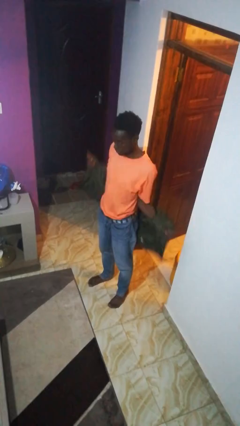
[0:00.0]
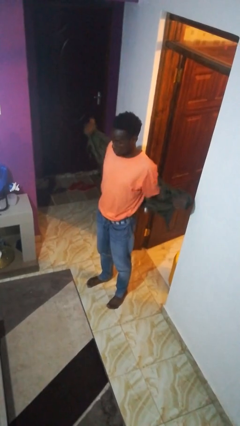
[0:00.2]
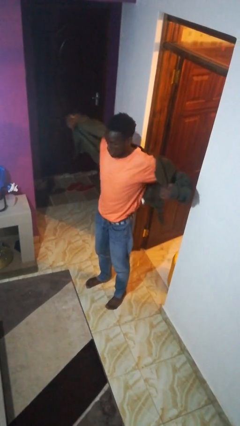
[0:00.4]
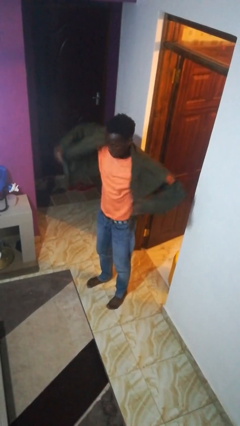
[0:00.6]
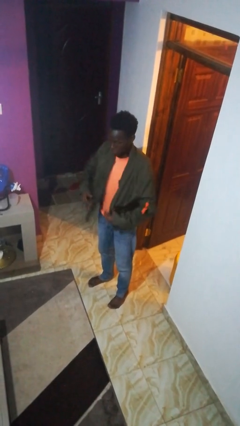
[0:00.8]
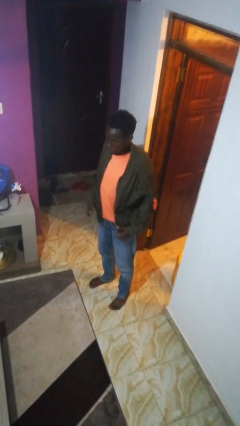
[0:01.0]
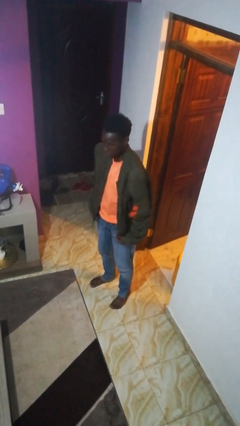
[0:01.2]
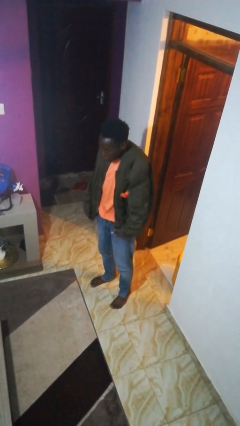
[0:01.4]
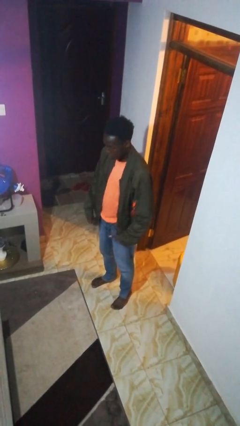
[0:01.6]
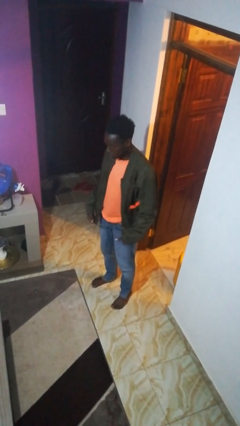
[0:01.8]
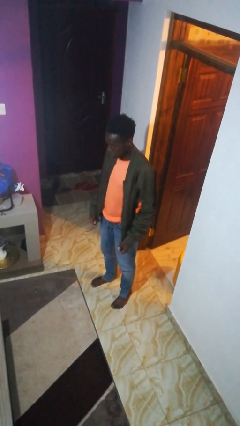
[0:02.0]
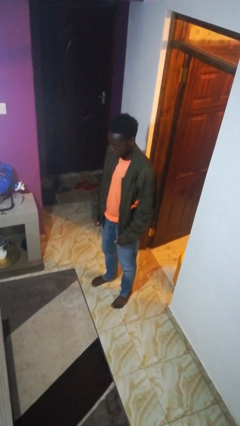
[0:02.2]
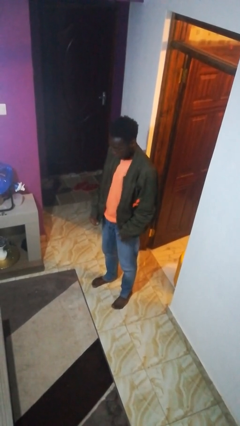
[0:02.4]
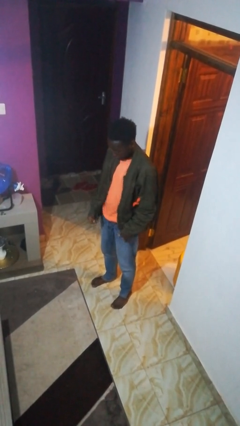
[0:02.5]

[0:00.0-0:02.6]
person puts on jacket

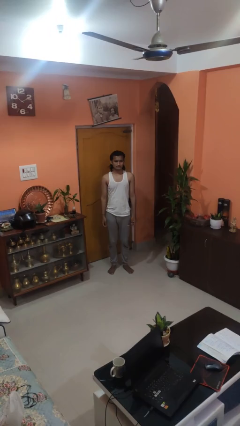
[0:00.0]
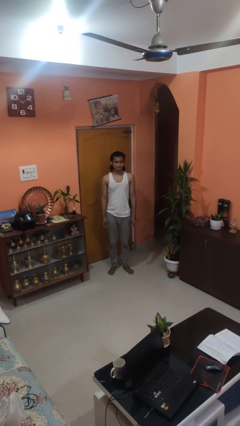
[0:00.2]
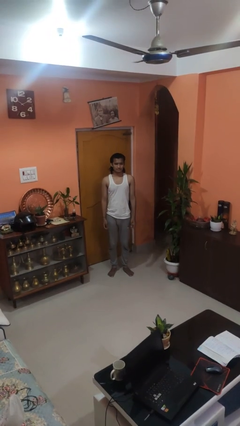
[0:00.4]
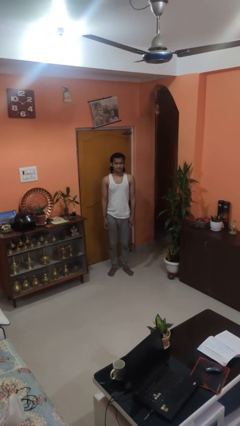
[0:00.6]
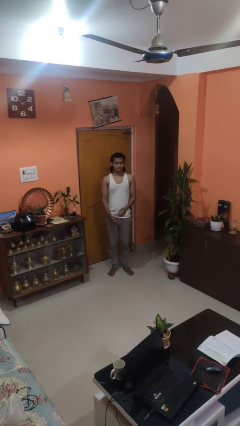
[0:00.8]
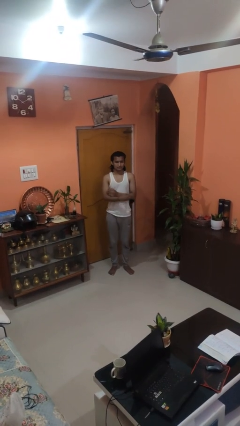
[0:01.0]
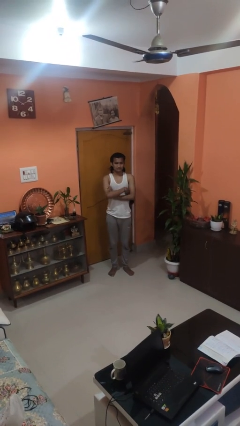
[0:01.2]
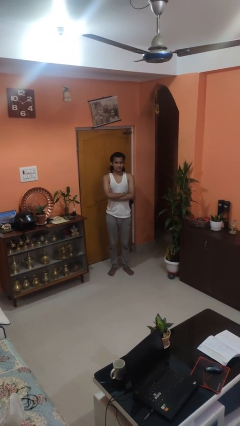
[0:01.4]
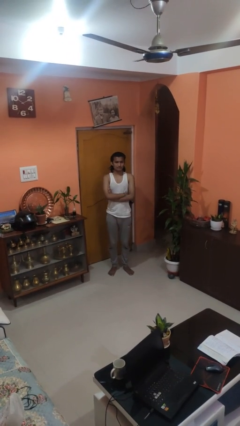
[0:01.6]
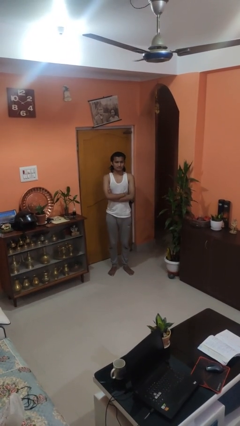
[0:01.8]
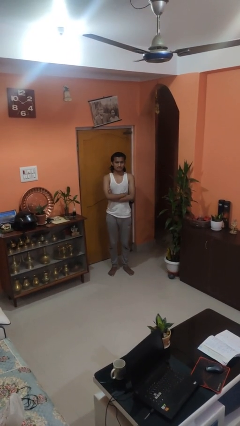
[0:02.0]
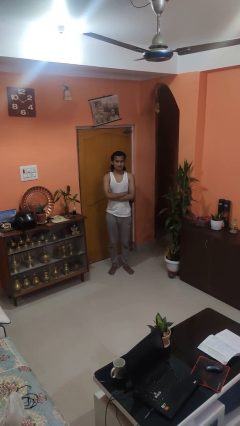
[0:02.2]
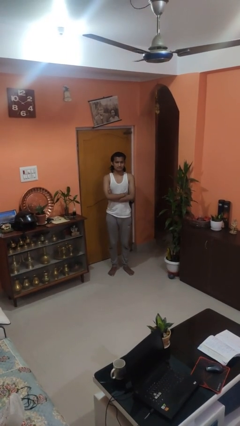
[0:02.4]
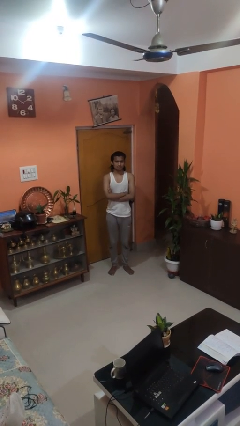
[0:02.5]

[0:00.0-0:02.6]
person crosses arms

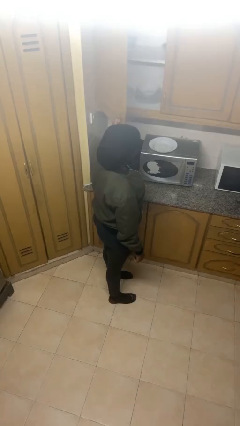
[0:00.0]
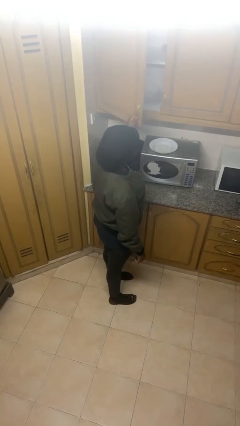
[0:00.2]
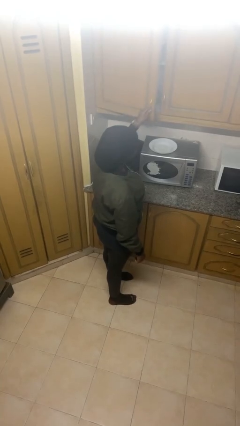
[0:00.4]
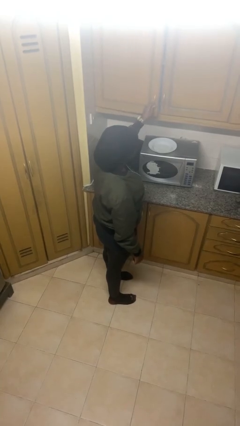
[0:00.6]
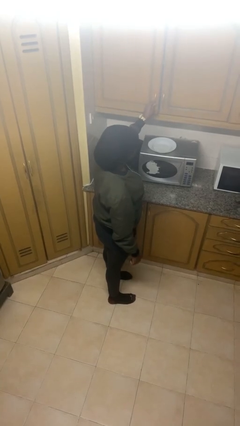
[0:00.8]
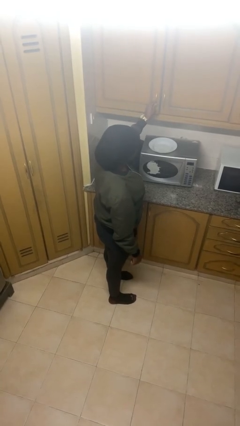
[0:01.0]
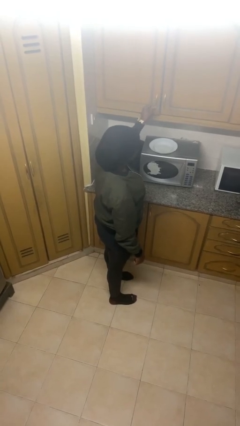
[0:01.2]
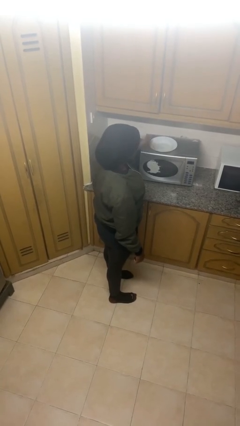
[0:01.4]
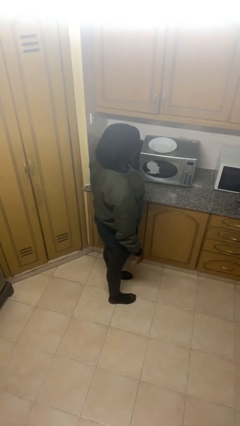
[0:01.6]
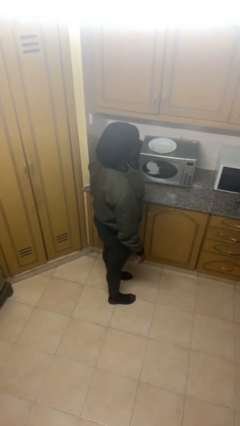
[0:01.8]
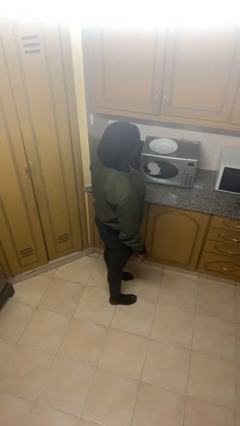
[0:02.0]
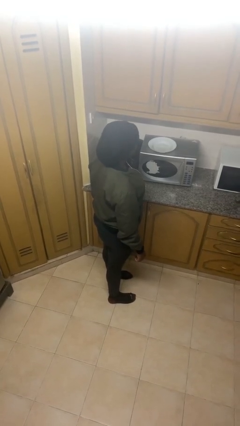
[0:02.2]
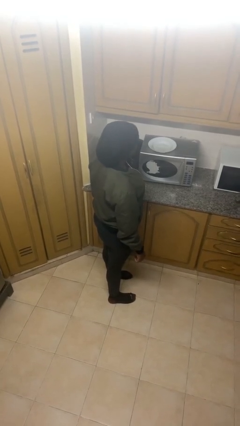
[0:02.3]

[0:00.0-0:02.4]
person closes cabinet

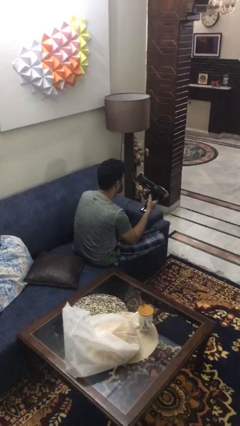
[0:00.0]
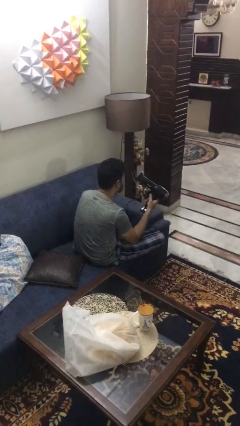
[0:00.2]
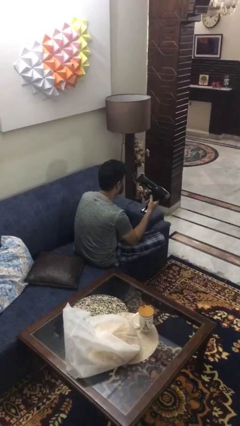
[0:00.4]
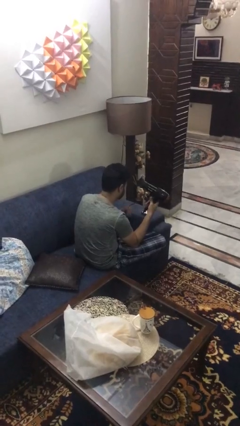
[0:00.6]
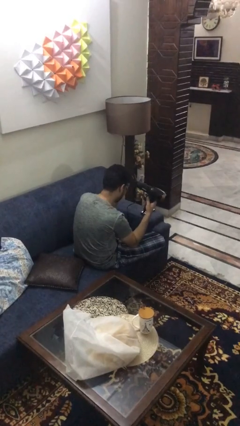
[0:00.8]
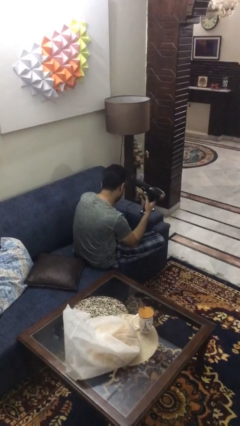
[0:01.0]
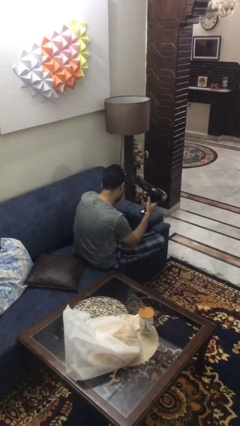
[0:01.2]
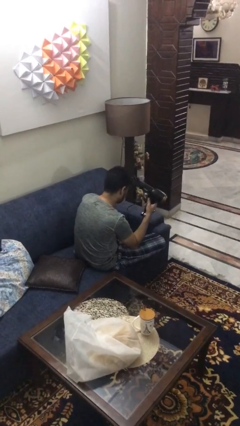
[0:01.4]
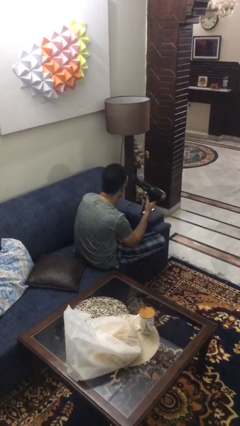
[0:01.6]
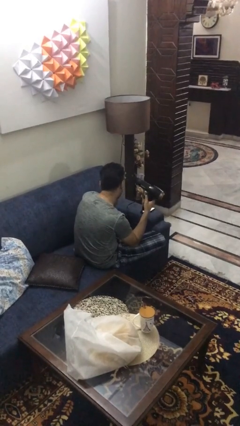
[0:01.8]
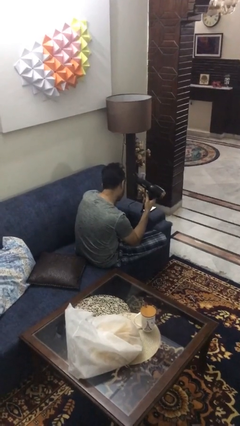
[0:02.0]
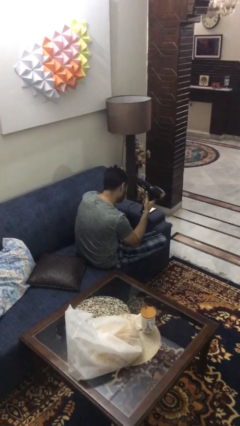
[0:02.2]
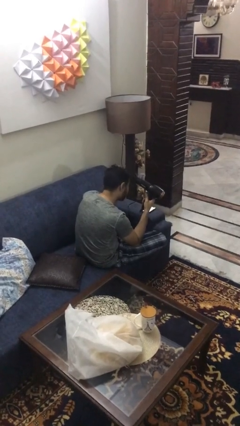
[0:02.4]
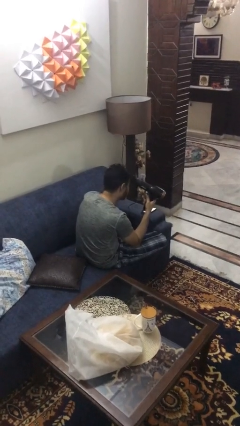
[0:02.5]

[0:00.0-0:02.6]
person dries hair with hairdryer

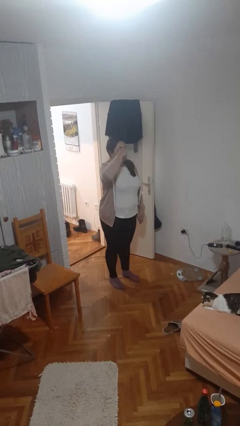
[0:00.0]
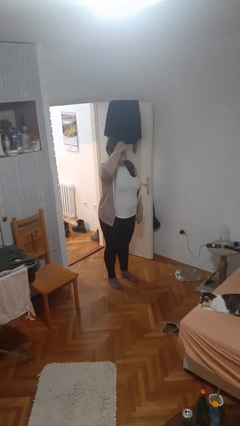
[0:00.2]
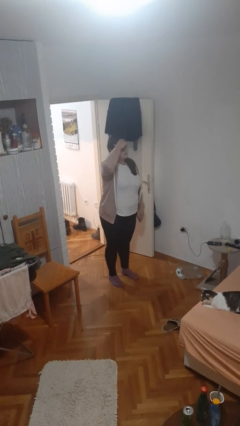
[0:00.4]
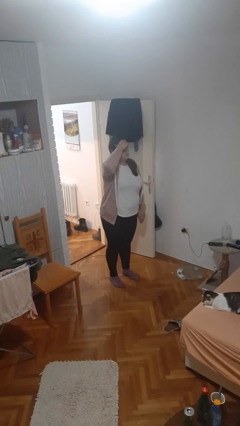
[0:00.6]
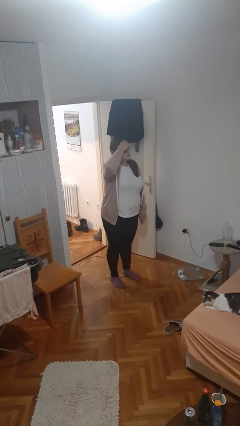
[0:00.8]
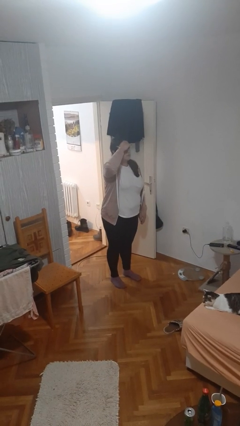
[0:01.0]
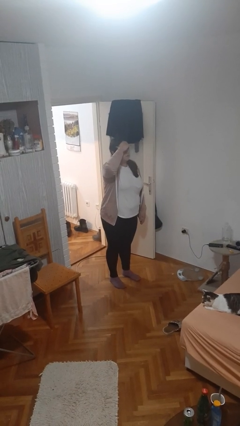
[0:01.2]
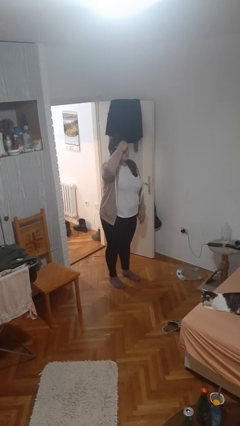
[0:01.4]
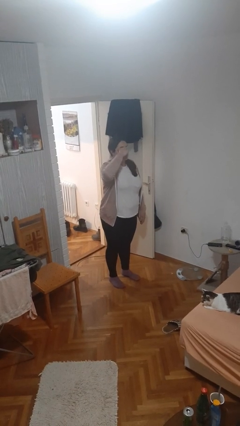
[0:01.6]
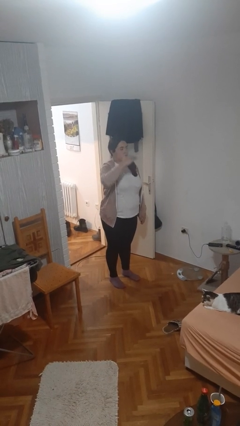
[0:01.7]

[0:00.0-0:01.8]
person shades eyes

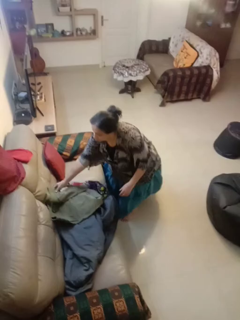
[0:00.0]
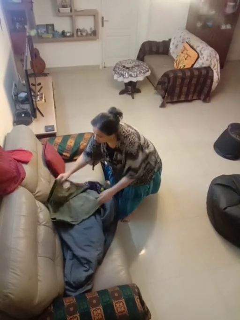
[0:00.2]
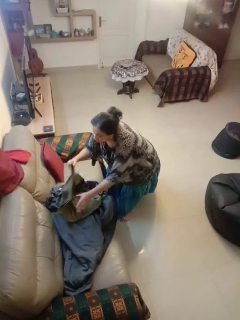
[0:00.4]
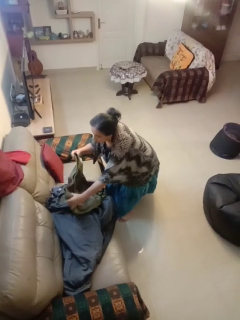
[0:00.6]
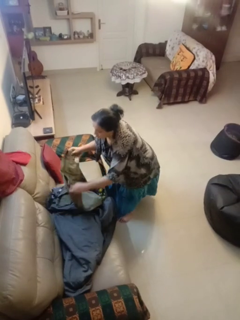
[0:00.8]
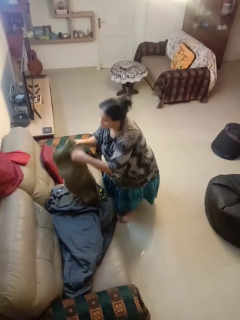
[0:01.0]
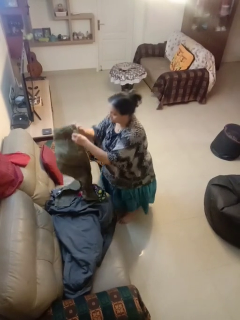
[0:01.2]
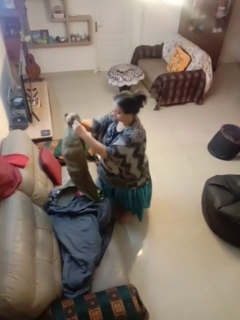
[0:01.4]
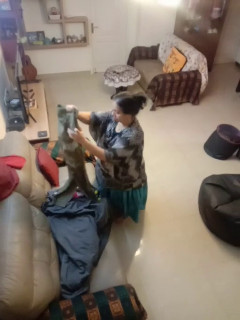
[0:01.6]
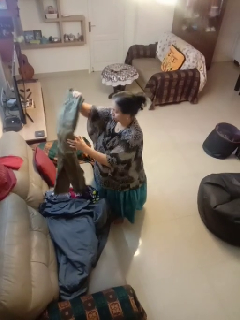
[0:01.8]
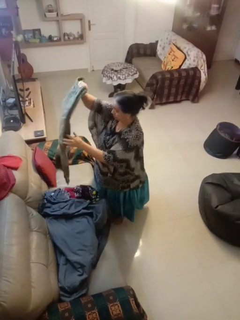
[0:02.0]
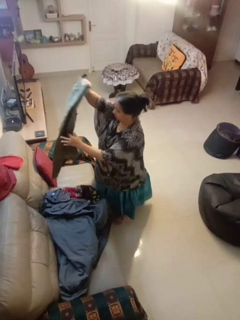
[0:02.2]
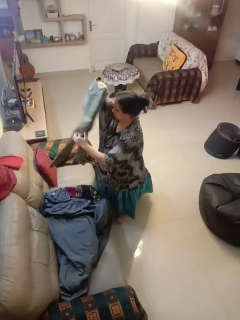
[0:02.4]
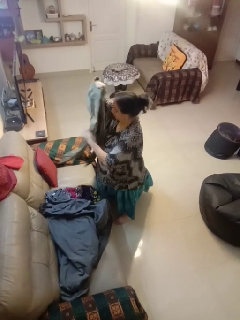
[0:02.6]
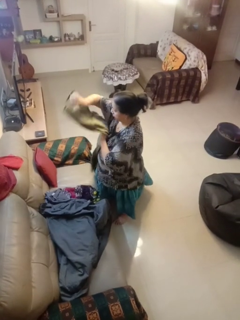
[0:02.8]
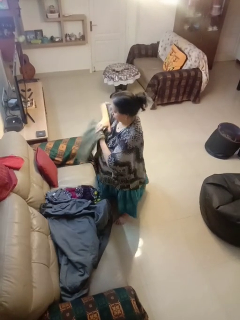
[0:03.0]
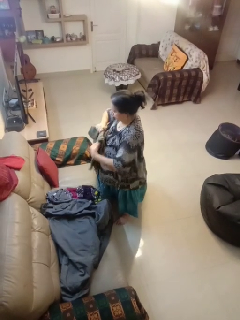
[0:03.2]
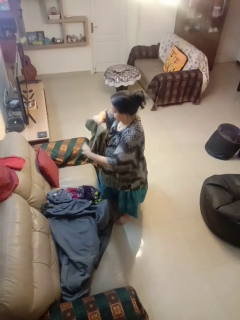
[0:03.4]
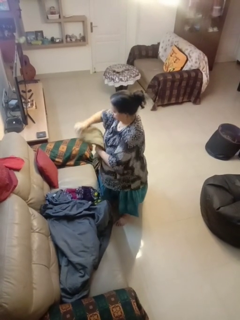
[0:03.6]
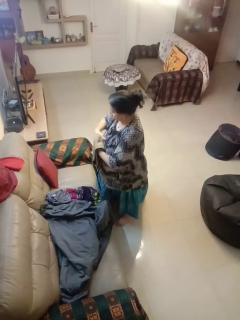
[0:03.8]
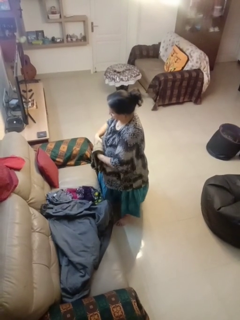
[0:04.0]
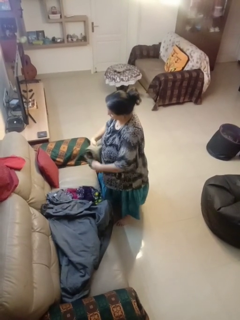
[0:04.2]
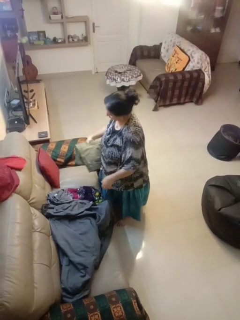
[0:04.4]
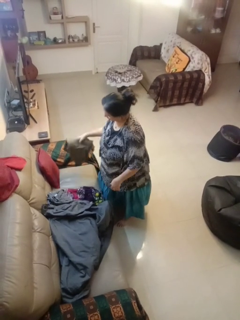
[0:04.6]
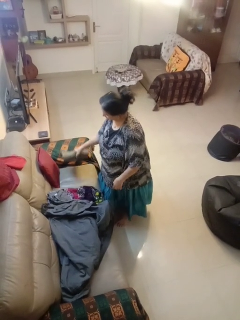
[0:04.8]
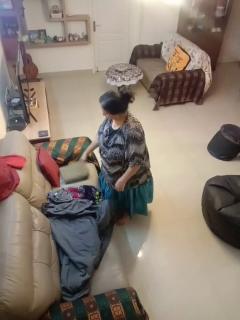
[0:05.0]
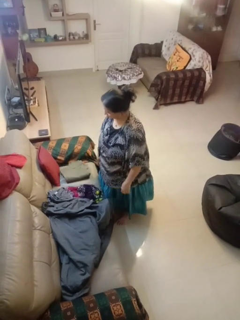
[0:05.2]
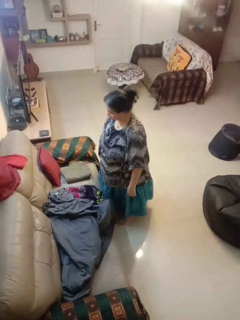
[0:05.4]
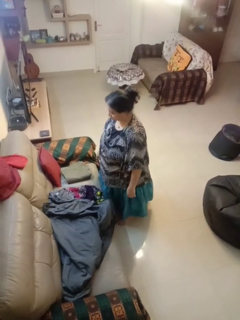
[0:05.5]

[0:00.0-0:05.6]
person folds pants

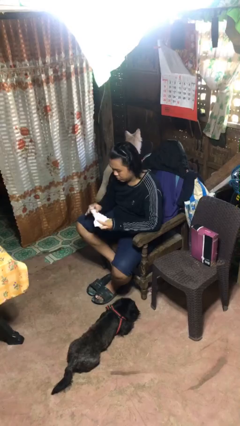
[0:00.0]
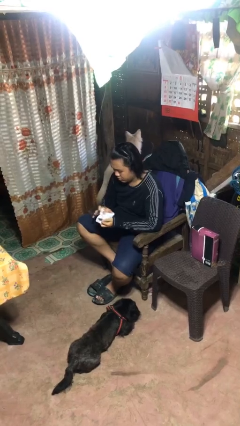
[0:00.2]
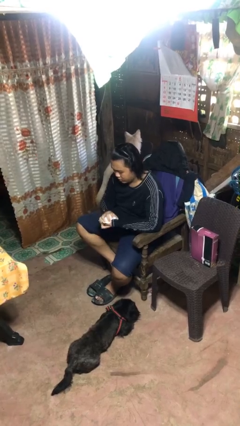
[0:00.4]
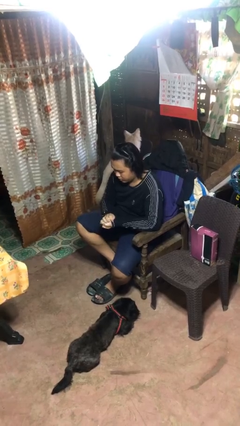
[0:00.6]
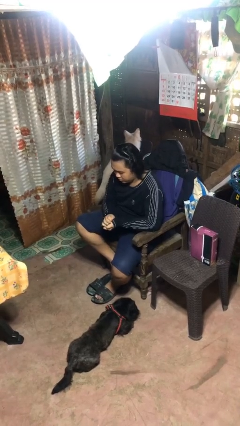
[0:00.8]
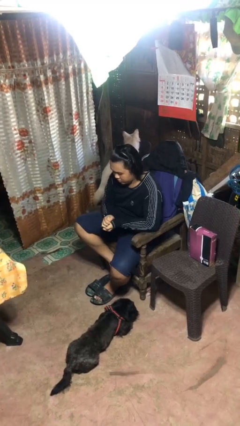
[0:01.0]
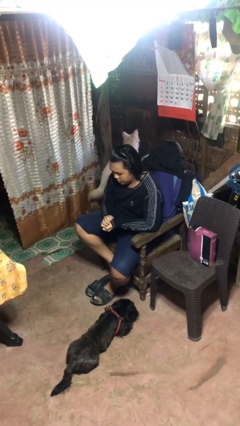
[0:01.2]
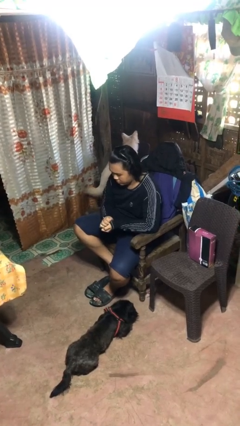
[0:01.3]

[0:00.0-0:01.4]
person crumples paper
